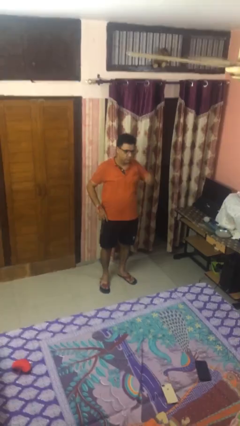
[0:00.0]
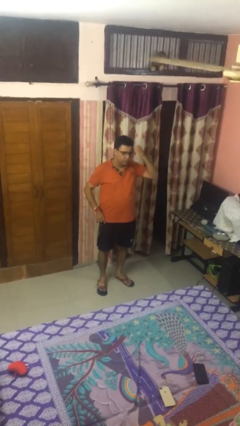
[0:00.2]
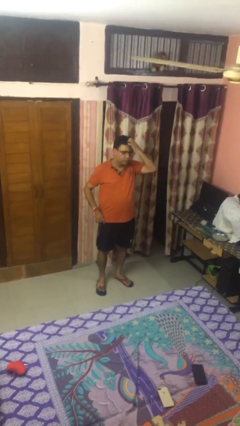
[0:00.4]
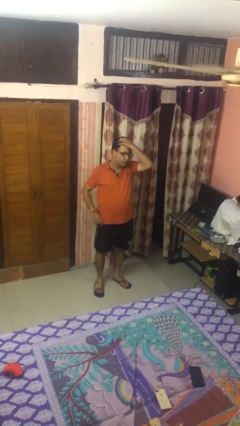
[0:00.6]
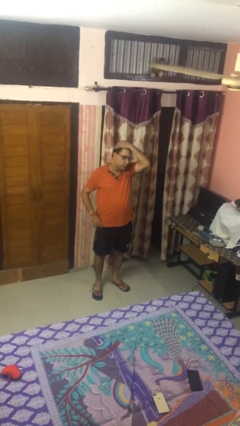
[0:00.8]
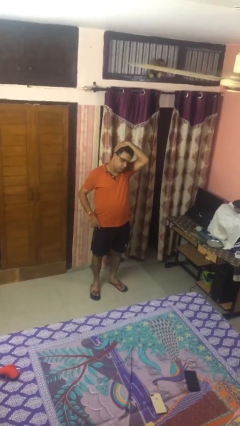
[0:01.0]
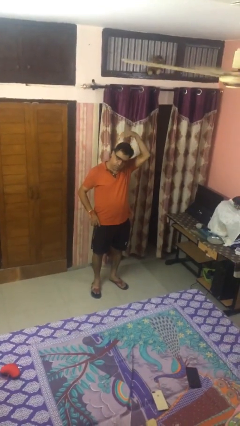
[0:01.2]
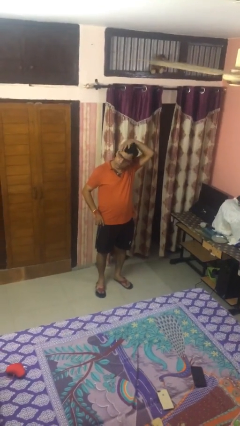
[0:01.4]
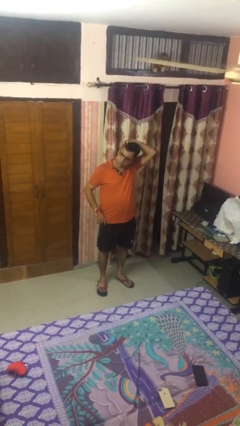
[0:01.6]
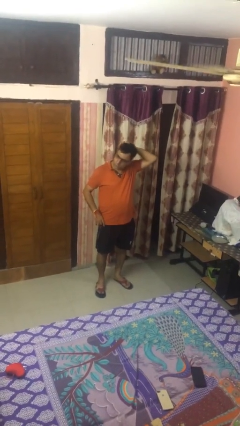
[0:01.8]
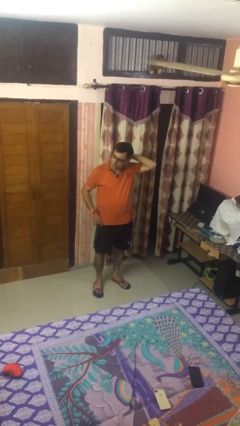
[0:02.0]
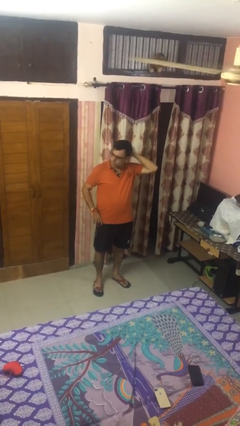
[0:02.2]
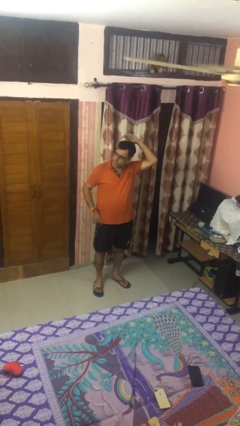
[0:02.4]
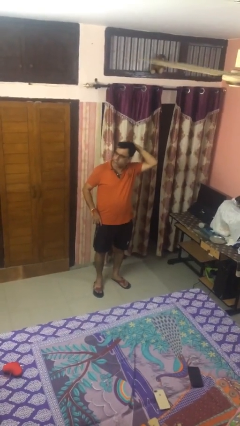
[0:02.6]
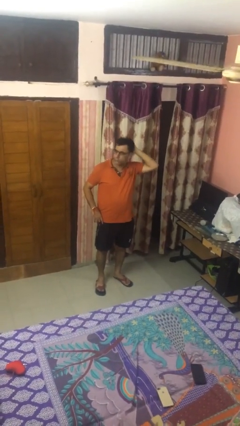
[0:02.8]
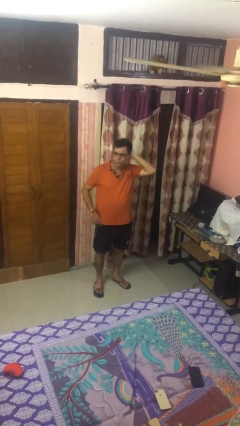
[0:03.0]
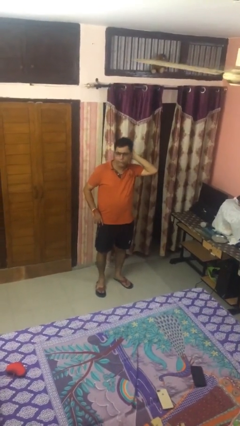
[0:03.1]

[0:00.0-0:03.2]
person strokes hair

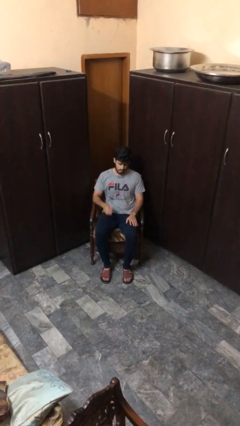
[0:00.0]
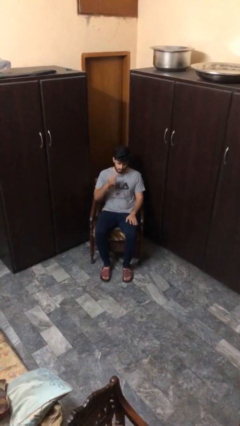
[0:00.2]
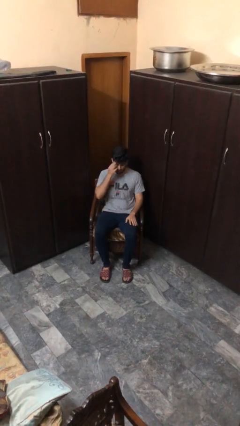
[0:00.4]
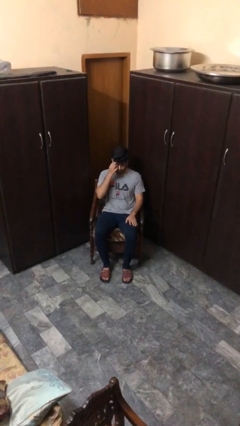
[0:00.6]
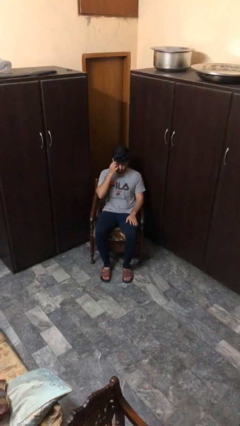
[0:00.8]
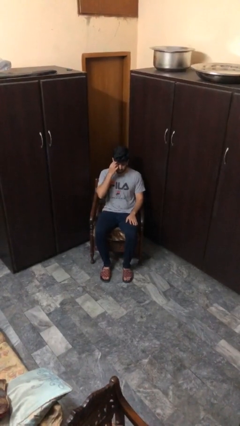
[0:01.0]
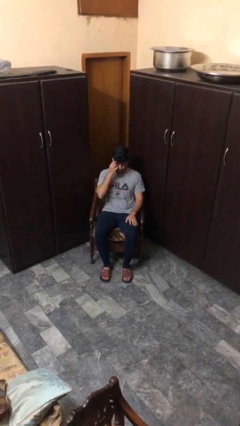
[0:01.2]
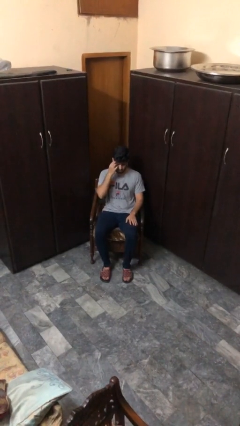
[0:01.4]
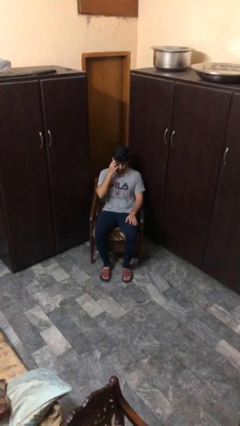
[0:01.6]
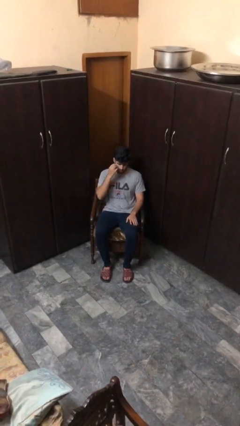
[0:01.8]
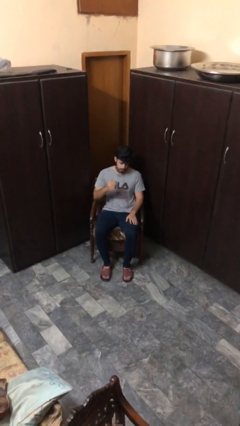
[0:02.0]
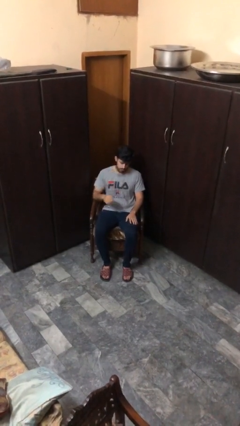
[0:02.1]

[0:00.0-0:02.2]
person scratches face

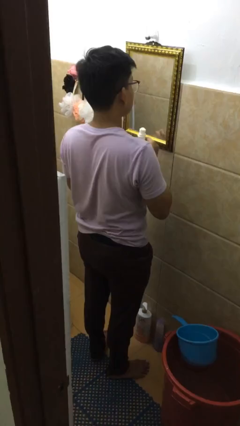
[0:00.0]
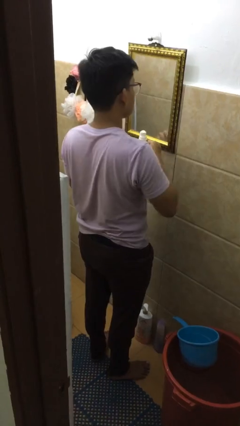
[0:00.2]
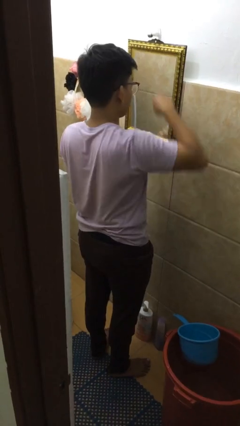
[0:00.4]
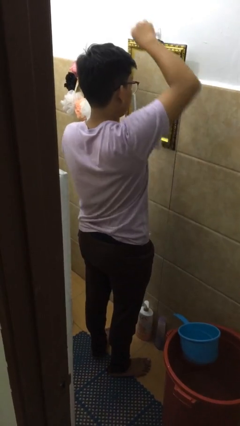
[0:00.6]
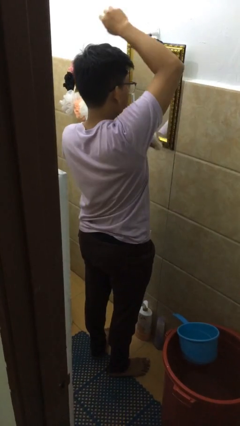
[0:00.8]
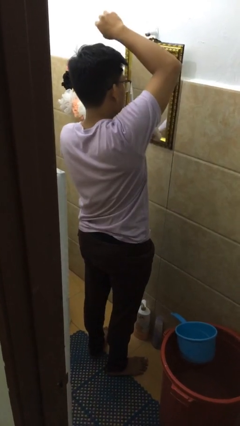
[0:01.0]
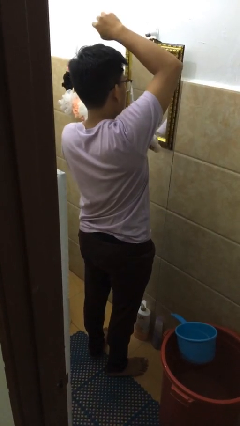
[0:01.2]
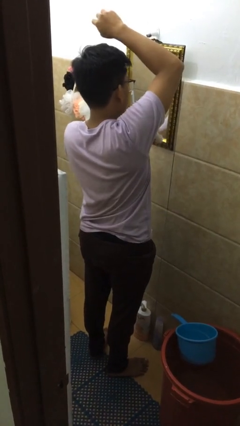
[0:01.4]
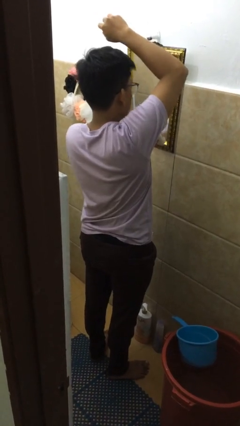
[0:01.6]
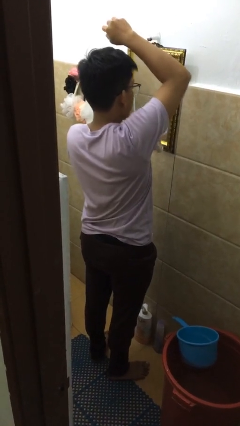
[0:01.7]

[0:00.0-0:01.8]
person applies deodorant

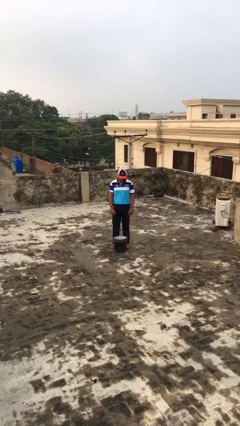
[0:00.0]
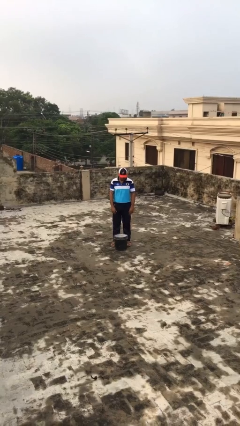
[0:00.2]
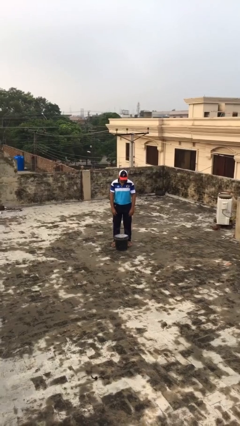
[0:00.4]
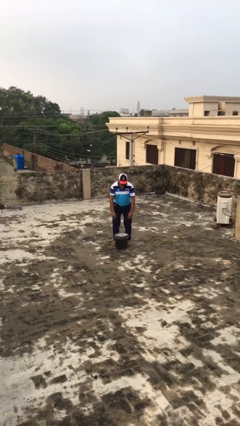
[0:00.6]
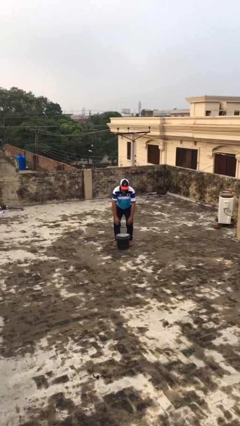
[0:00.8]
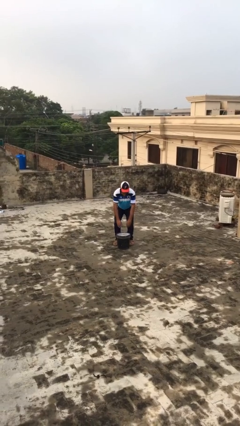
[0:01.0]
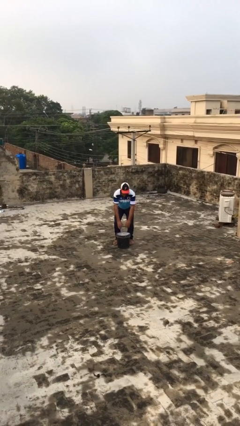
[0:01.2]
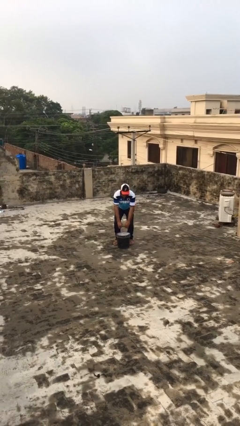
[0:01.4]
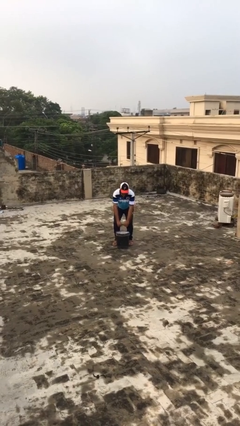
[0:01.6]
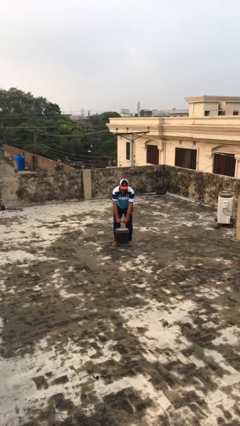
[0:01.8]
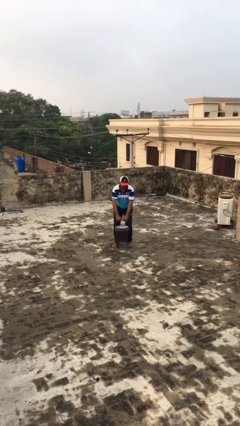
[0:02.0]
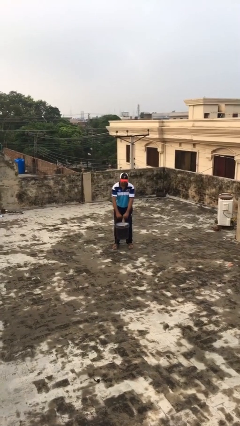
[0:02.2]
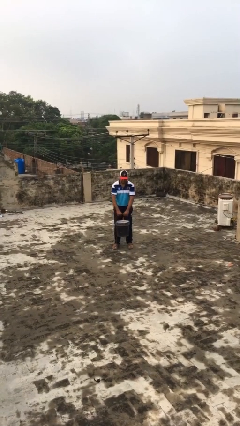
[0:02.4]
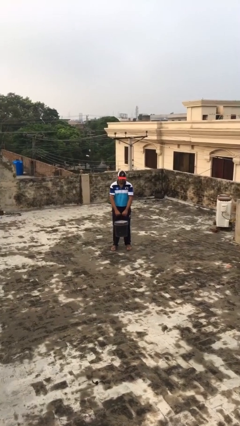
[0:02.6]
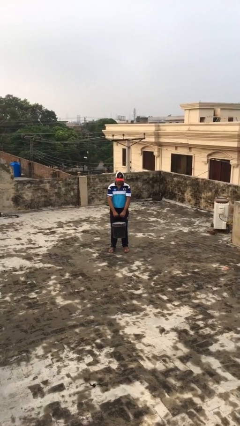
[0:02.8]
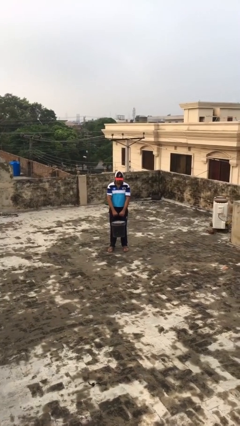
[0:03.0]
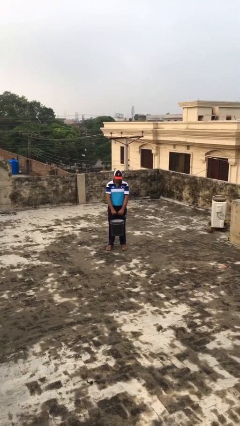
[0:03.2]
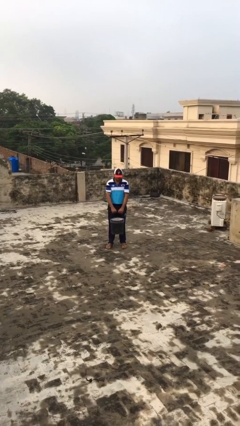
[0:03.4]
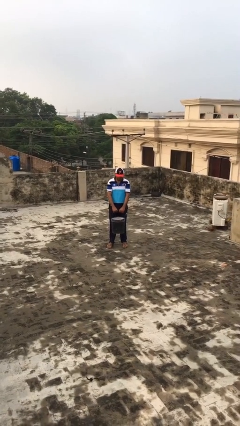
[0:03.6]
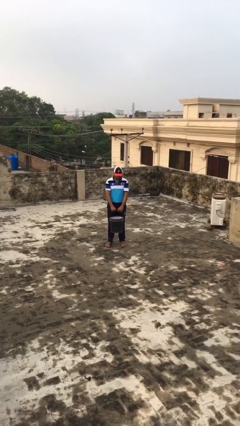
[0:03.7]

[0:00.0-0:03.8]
person picks up object from floor

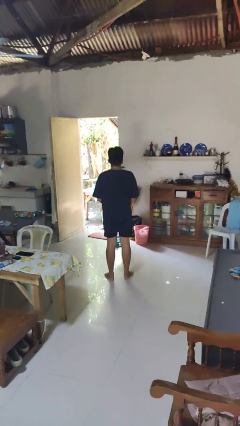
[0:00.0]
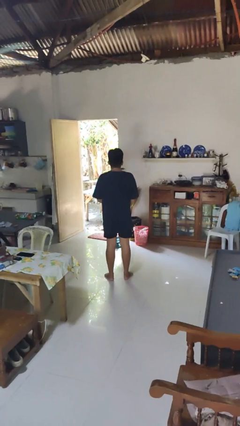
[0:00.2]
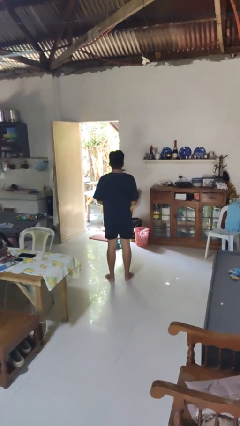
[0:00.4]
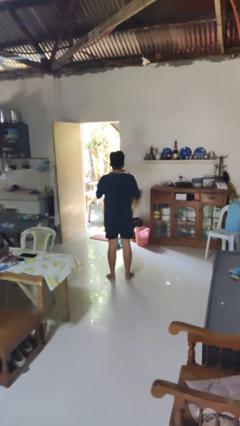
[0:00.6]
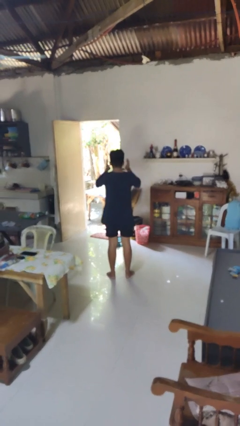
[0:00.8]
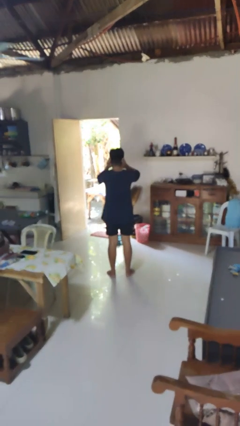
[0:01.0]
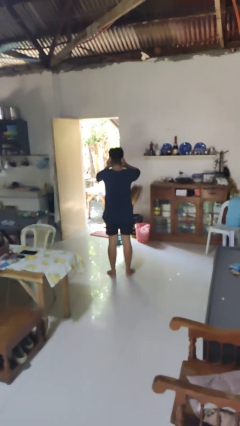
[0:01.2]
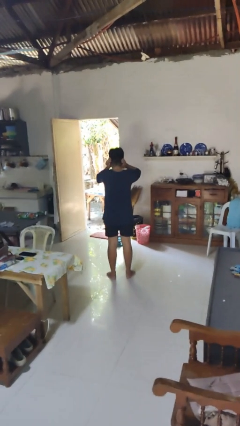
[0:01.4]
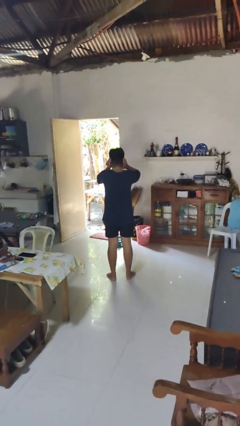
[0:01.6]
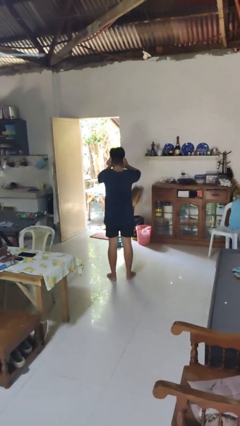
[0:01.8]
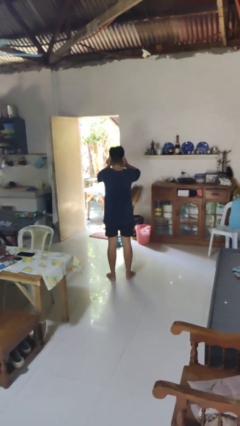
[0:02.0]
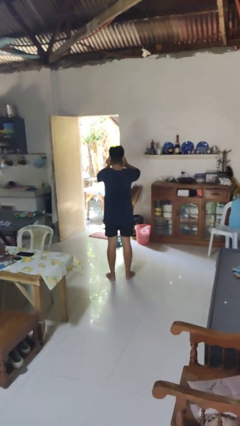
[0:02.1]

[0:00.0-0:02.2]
person puts fingers in ear

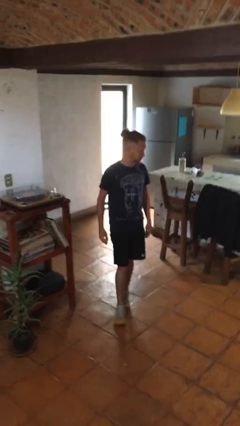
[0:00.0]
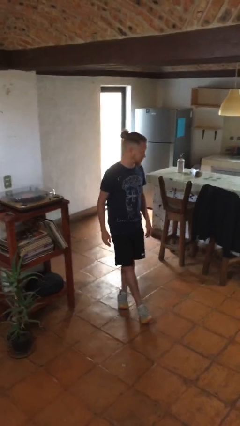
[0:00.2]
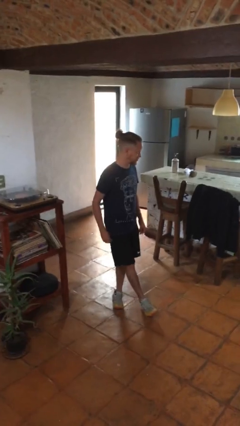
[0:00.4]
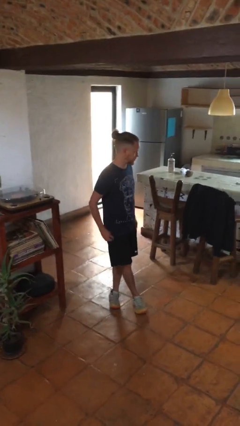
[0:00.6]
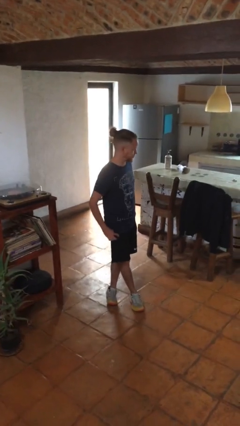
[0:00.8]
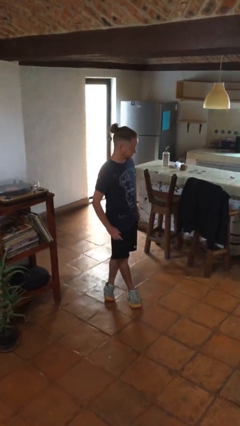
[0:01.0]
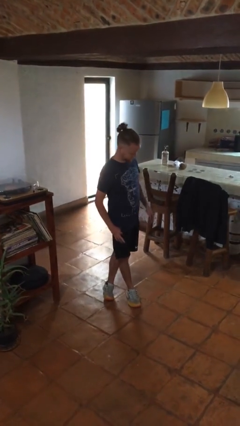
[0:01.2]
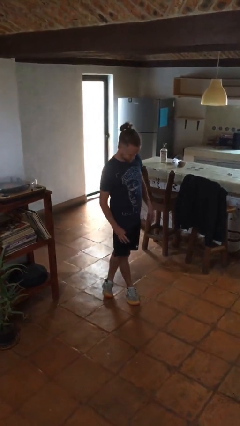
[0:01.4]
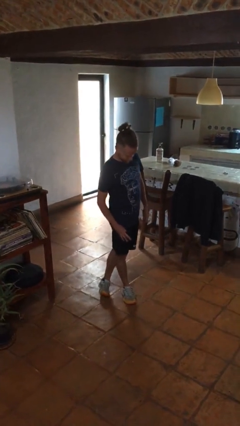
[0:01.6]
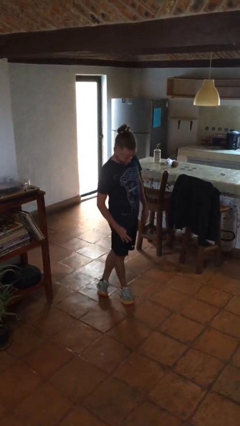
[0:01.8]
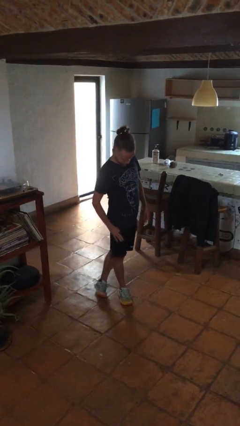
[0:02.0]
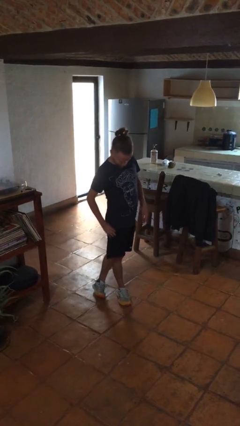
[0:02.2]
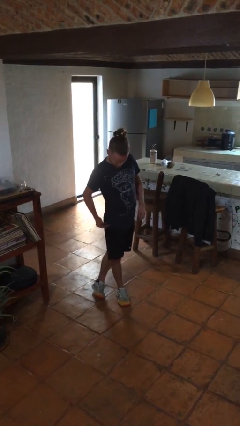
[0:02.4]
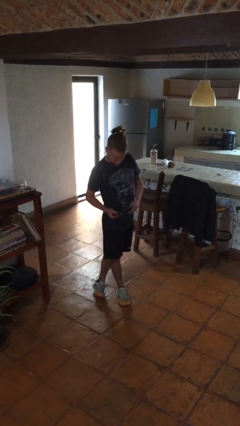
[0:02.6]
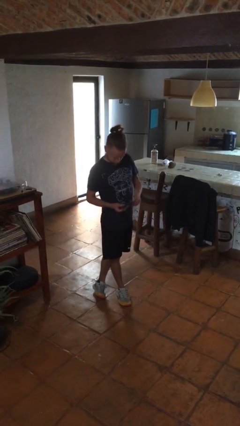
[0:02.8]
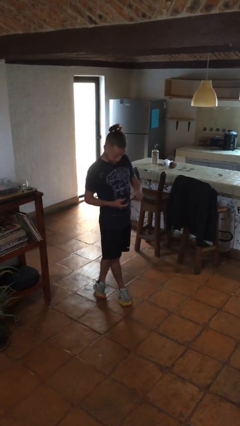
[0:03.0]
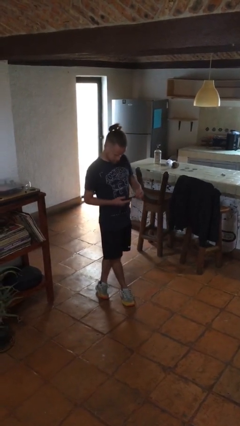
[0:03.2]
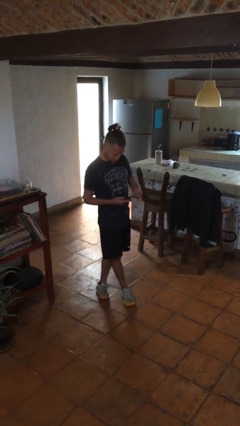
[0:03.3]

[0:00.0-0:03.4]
person takes phone from pocket

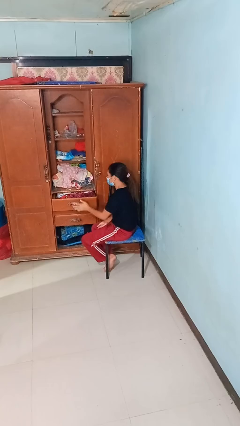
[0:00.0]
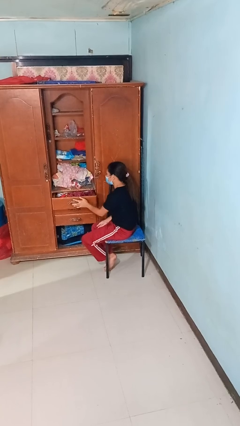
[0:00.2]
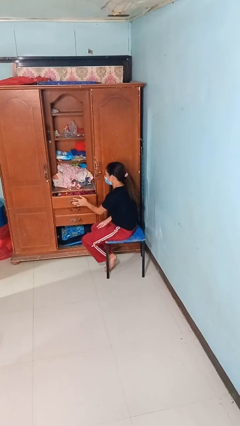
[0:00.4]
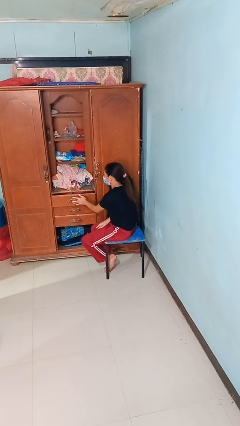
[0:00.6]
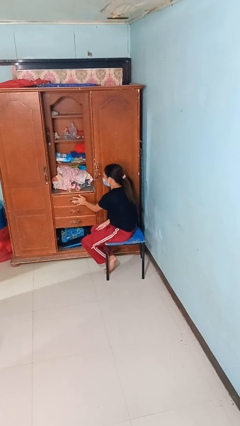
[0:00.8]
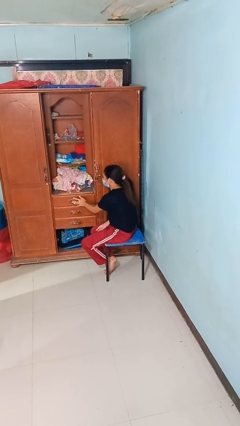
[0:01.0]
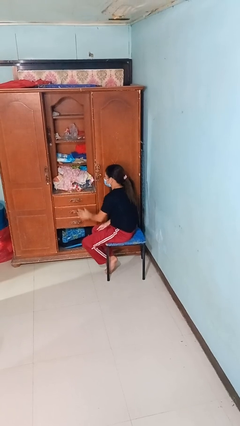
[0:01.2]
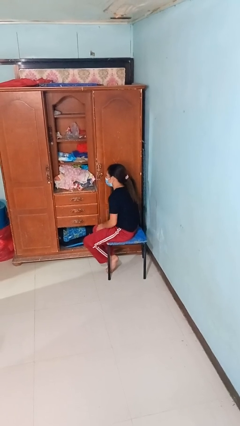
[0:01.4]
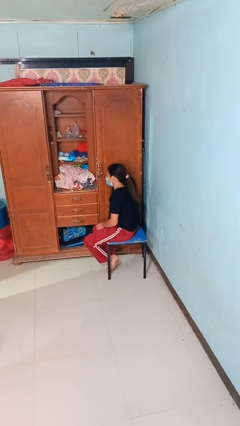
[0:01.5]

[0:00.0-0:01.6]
person closes dresser drawer
